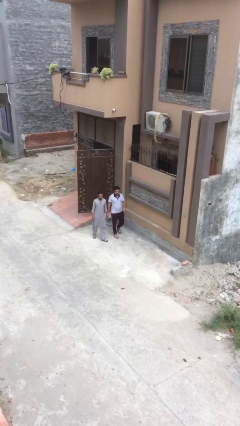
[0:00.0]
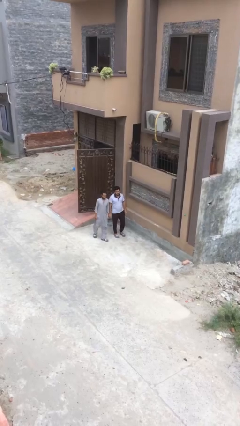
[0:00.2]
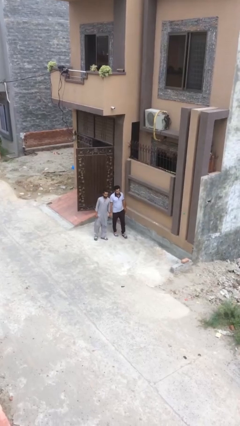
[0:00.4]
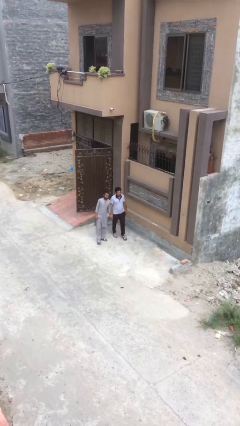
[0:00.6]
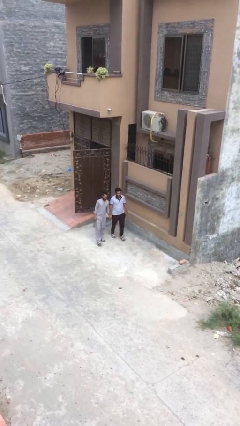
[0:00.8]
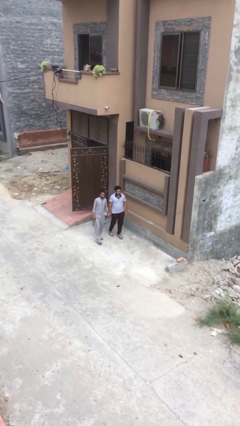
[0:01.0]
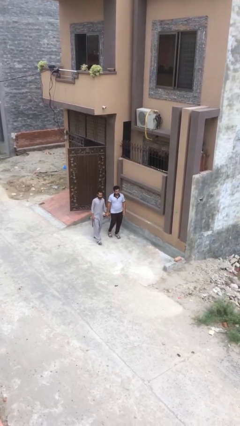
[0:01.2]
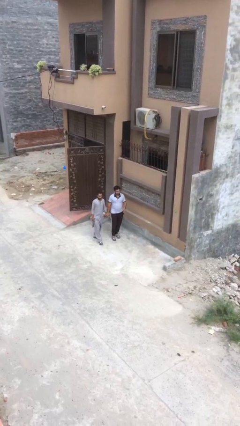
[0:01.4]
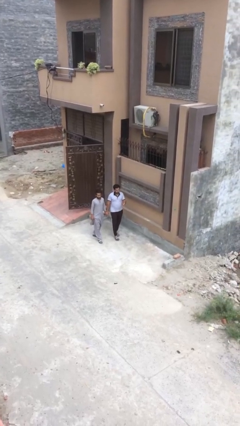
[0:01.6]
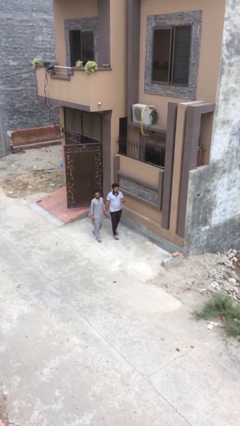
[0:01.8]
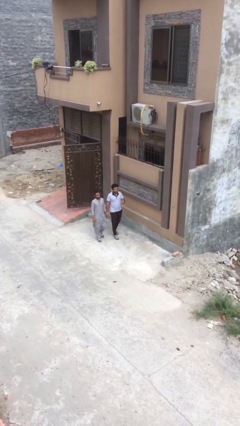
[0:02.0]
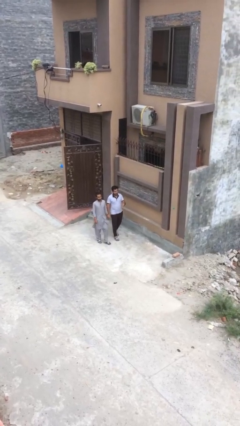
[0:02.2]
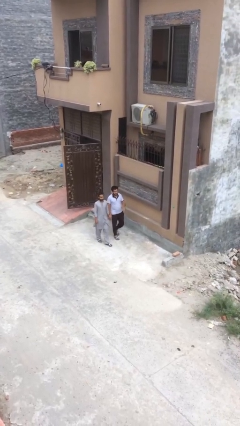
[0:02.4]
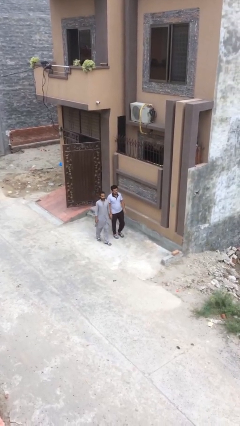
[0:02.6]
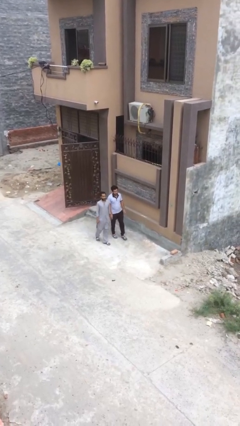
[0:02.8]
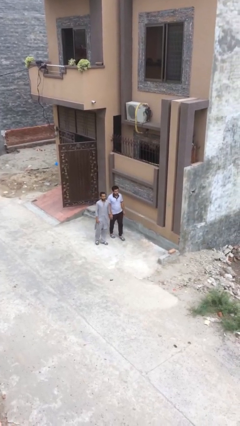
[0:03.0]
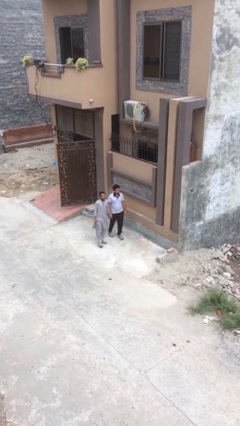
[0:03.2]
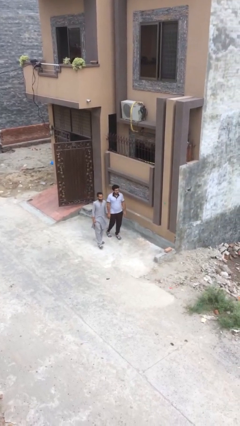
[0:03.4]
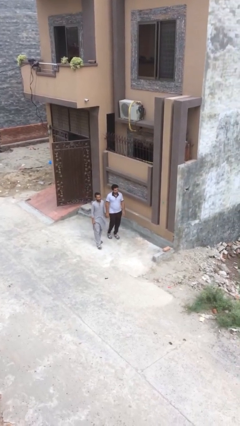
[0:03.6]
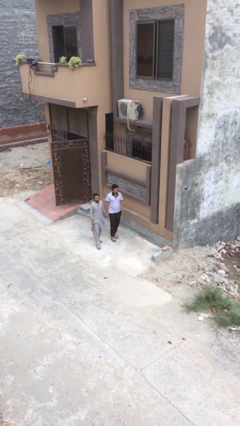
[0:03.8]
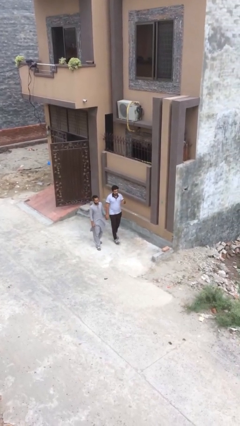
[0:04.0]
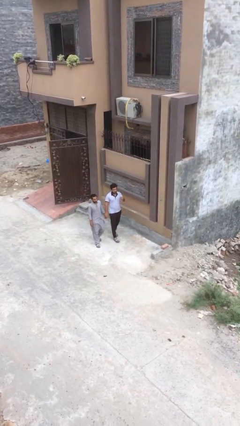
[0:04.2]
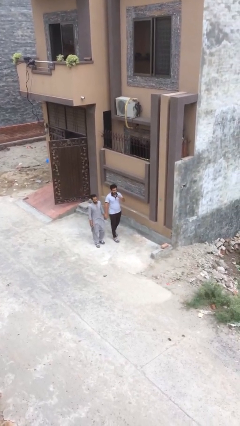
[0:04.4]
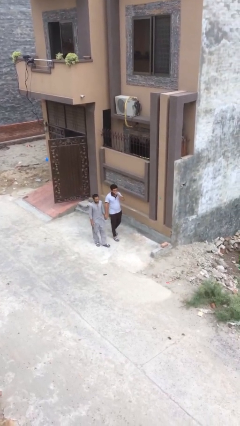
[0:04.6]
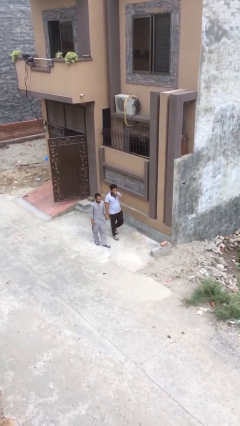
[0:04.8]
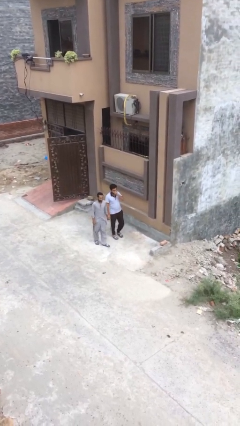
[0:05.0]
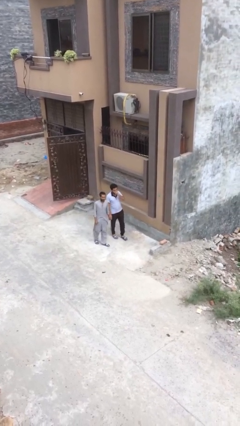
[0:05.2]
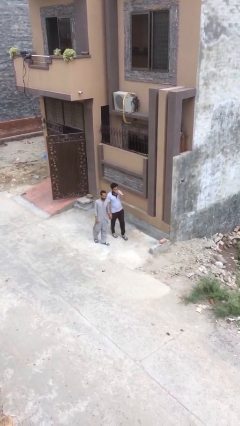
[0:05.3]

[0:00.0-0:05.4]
person holds hand

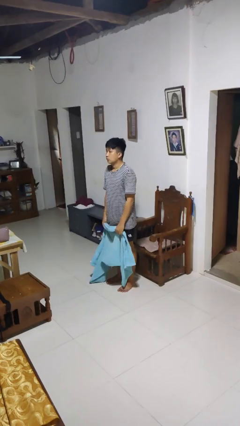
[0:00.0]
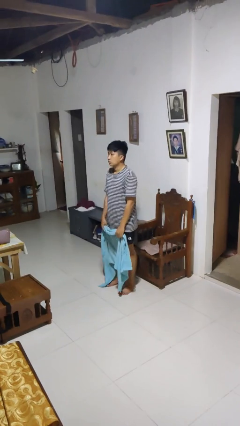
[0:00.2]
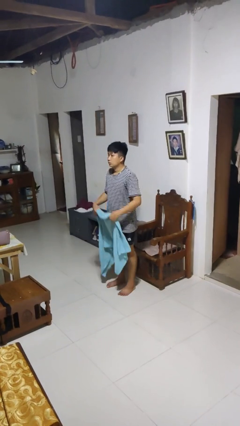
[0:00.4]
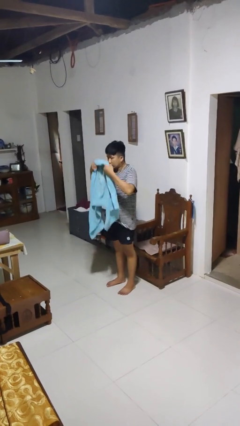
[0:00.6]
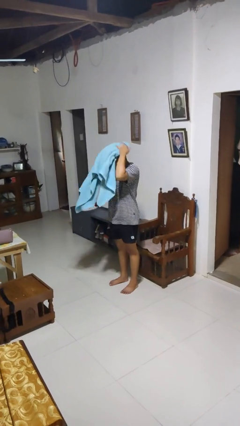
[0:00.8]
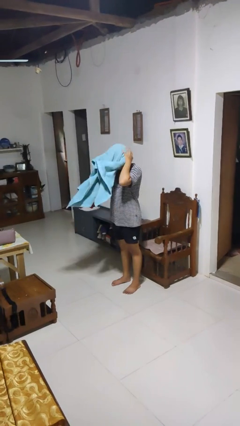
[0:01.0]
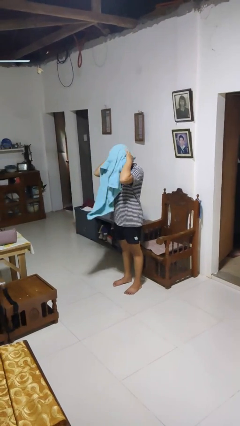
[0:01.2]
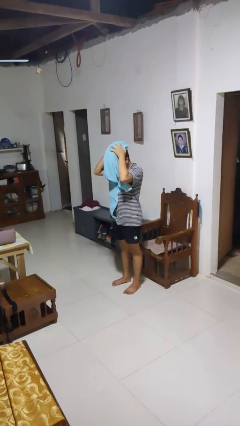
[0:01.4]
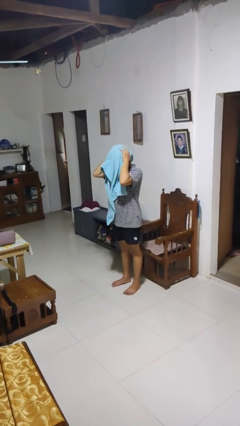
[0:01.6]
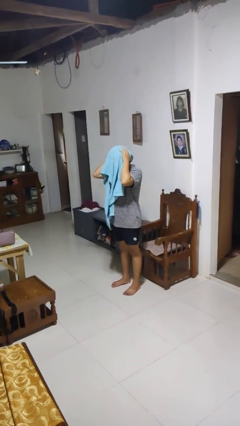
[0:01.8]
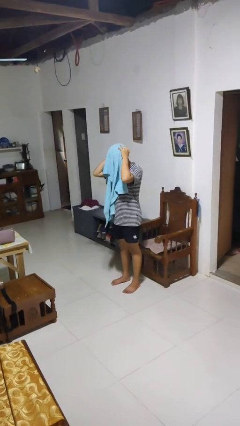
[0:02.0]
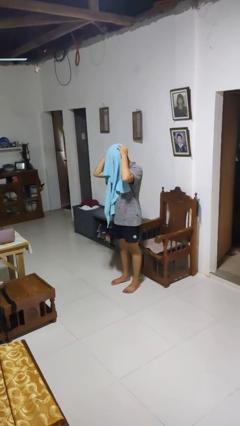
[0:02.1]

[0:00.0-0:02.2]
person dries hair with towel

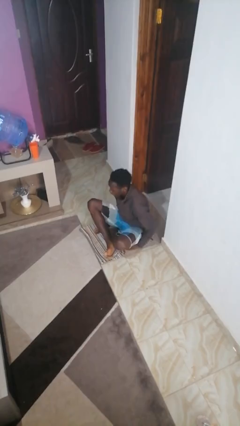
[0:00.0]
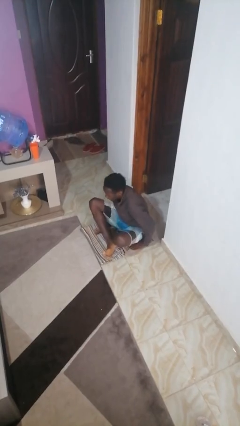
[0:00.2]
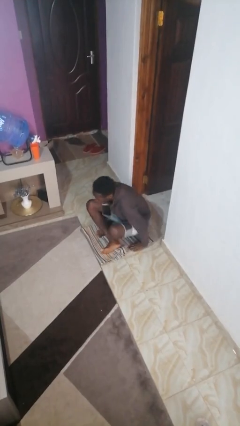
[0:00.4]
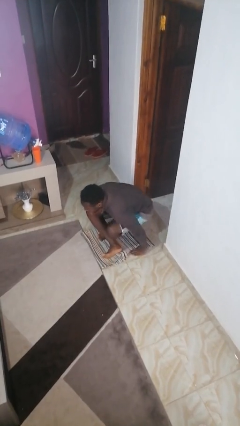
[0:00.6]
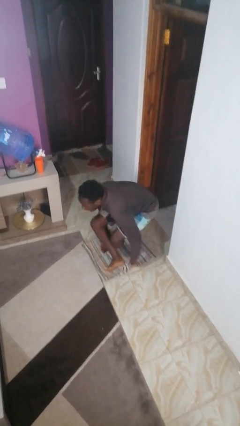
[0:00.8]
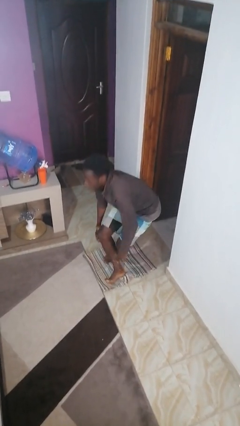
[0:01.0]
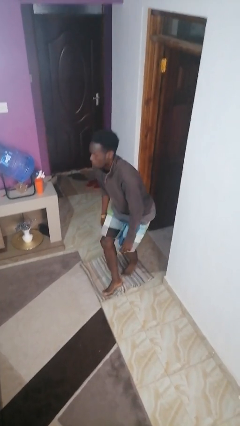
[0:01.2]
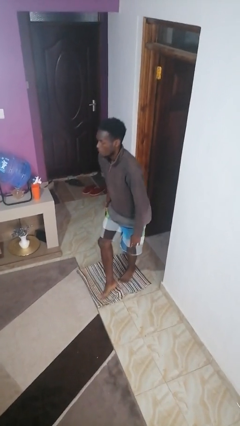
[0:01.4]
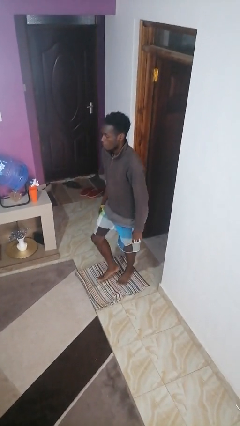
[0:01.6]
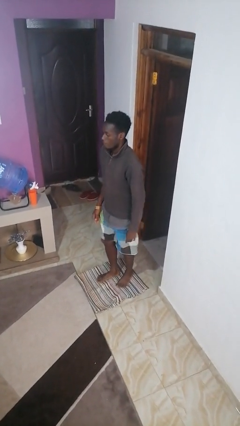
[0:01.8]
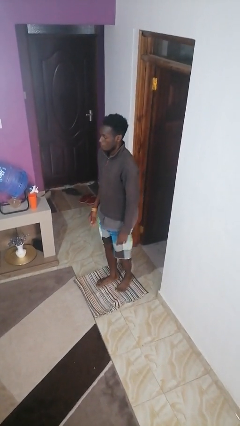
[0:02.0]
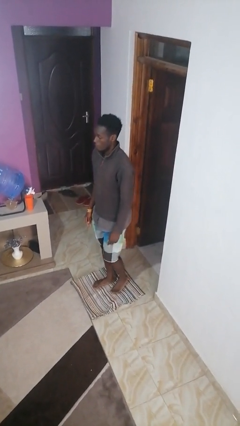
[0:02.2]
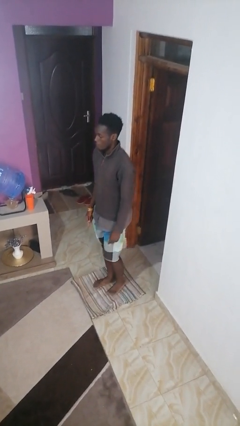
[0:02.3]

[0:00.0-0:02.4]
person stands up from floor

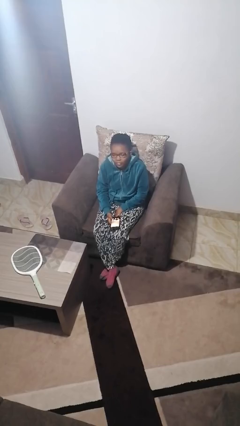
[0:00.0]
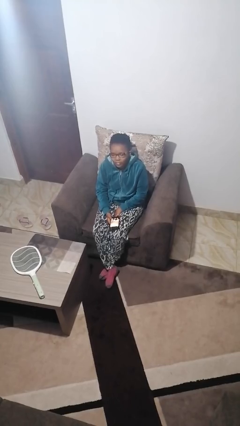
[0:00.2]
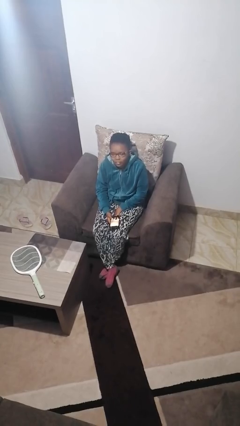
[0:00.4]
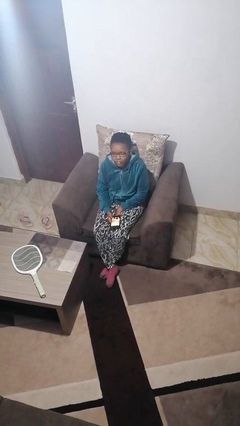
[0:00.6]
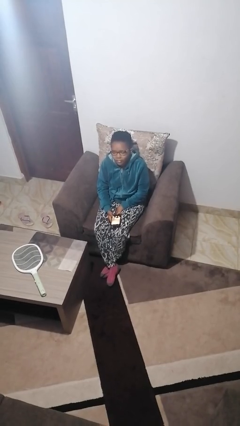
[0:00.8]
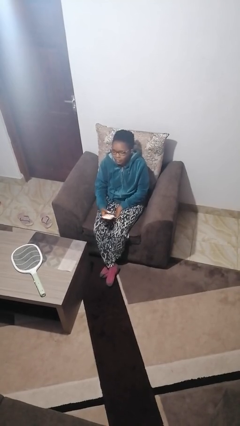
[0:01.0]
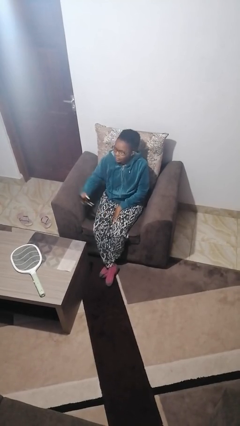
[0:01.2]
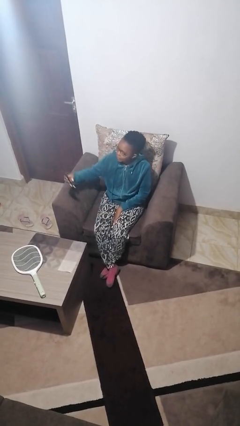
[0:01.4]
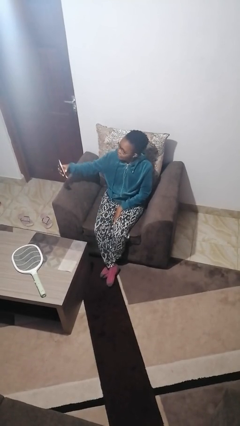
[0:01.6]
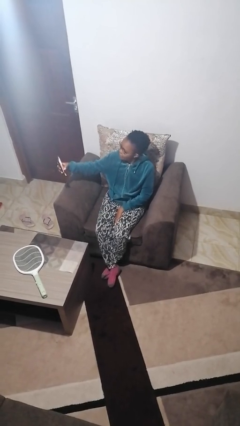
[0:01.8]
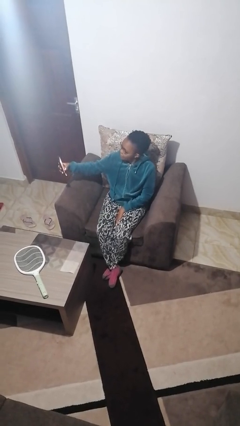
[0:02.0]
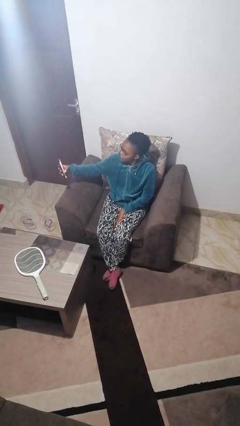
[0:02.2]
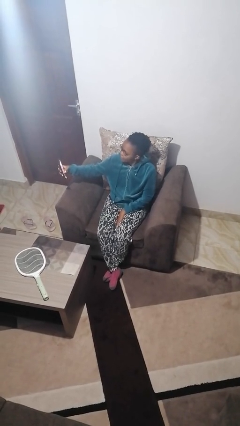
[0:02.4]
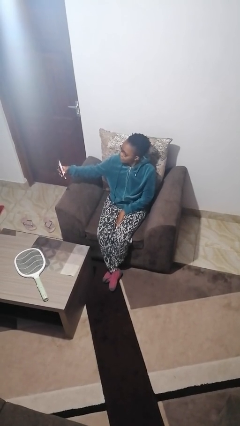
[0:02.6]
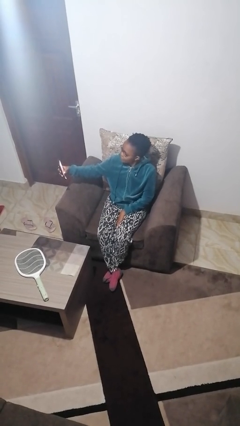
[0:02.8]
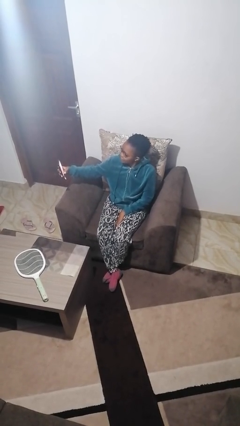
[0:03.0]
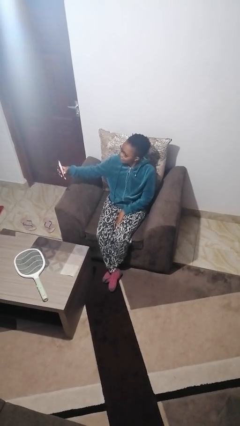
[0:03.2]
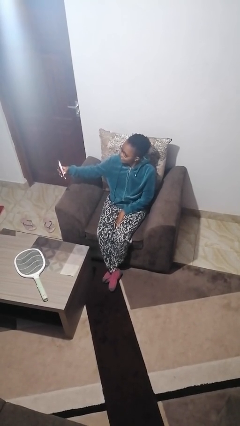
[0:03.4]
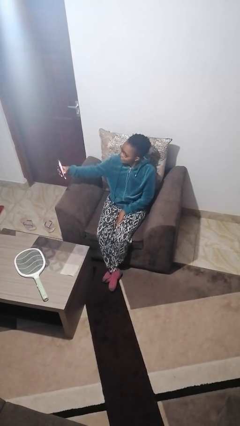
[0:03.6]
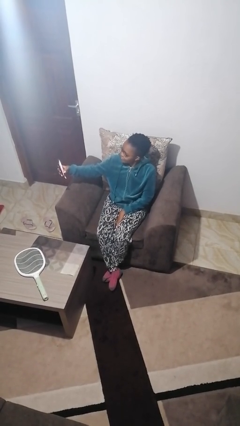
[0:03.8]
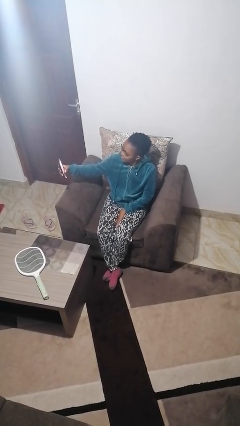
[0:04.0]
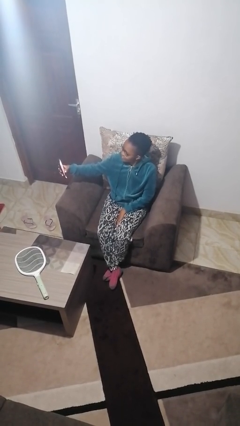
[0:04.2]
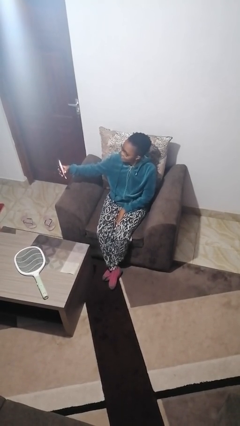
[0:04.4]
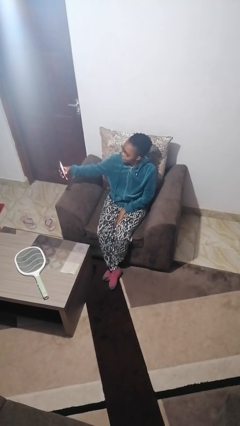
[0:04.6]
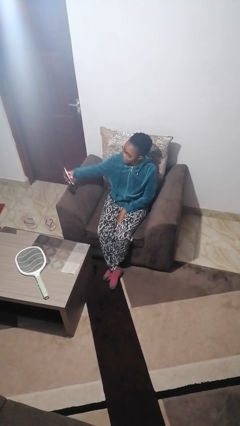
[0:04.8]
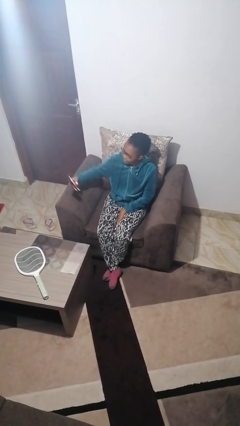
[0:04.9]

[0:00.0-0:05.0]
person takes selfie

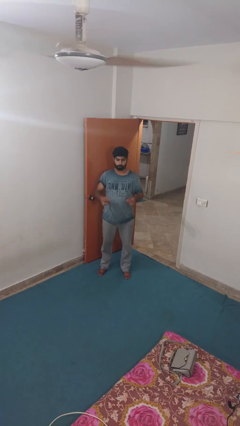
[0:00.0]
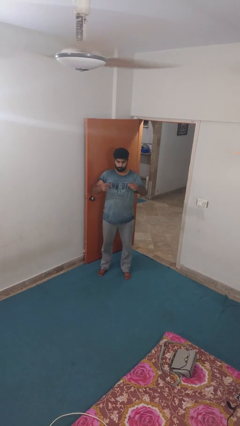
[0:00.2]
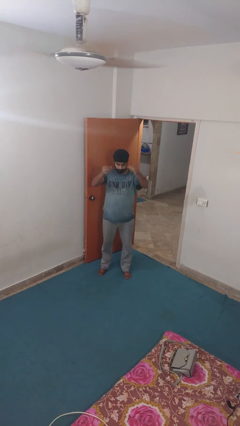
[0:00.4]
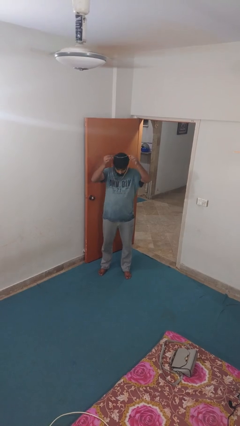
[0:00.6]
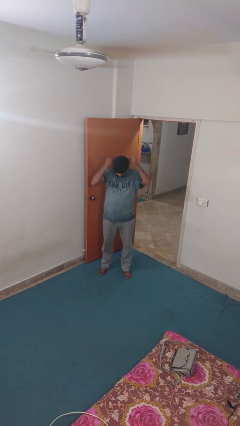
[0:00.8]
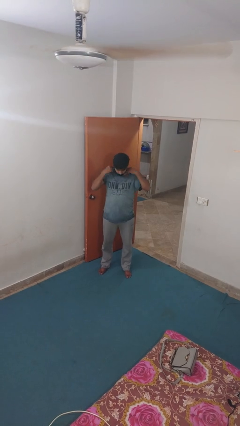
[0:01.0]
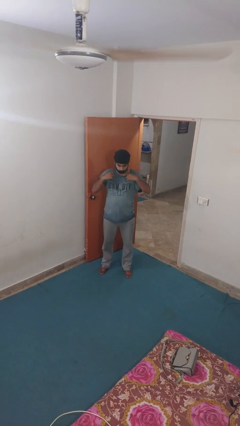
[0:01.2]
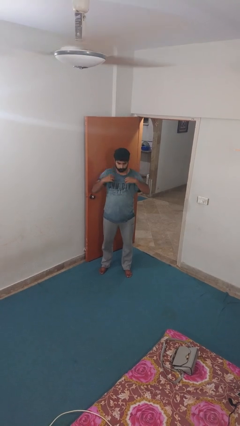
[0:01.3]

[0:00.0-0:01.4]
person puts on necklace

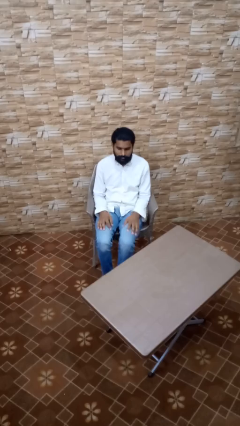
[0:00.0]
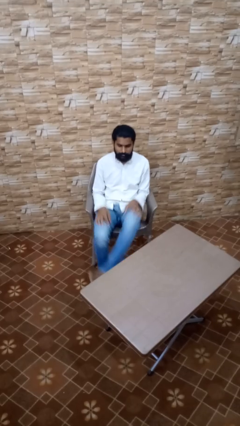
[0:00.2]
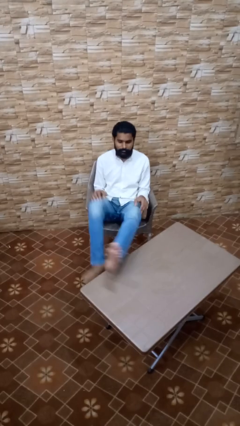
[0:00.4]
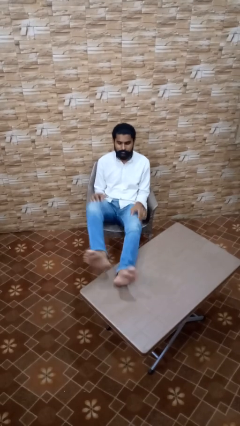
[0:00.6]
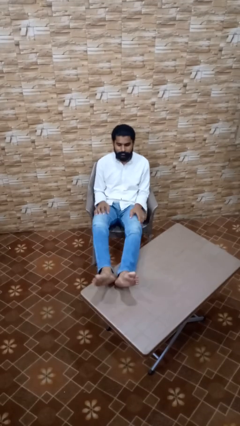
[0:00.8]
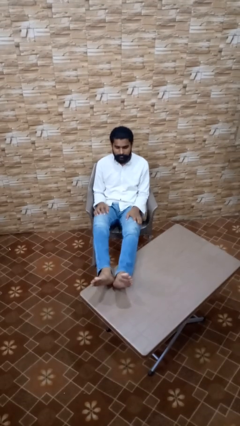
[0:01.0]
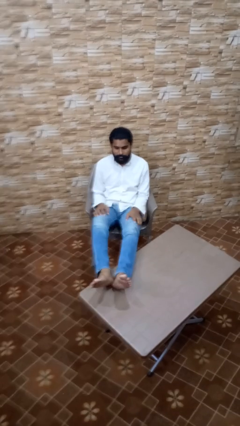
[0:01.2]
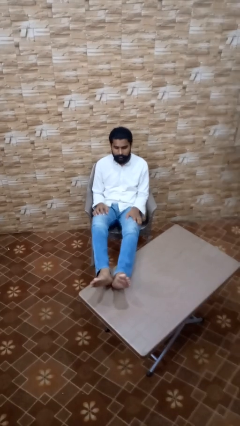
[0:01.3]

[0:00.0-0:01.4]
person puts feet up
